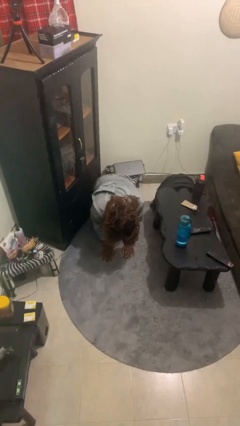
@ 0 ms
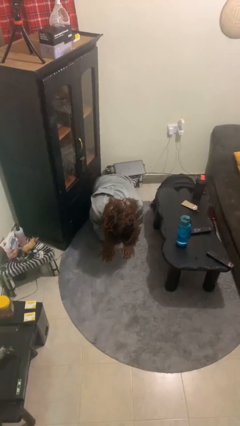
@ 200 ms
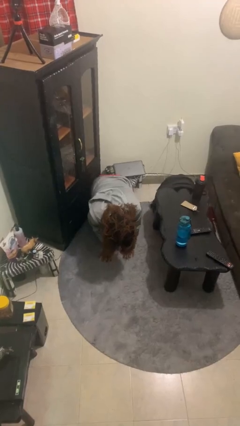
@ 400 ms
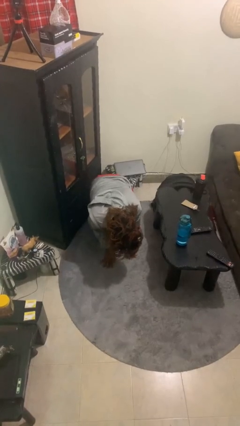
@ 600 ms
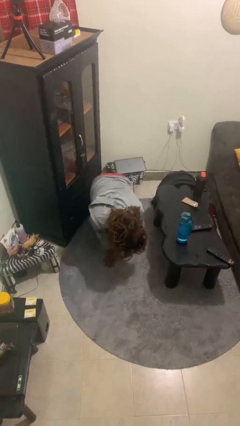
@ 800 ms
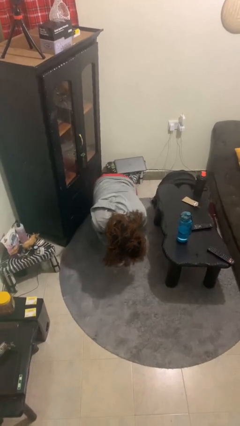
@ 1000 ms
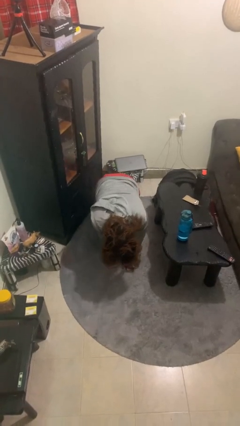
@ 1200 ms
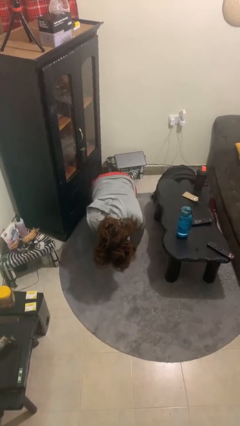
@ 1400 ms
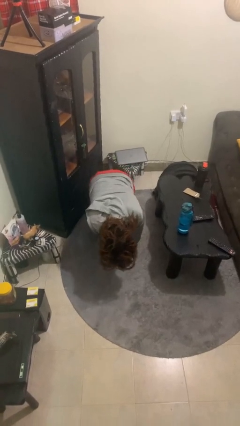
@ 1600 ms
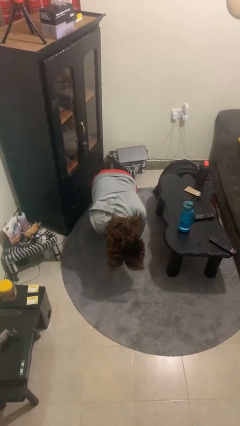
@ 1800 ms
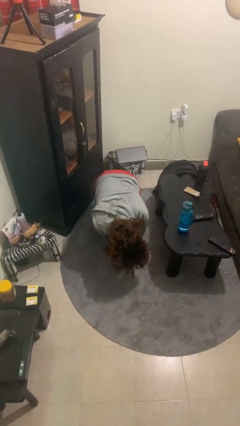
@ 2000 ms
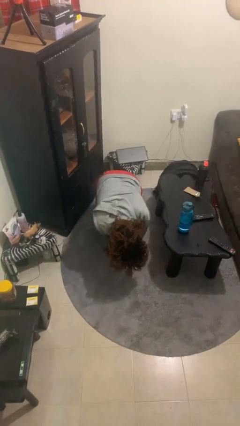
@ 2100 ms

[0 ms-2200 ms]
person crawls

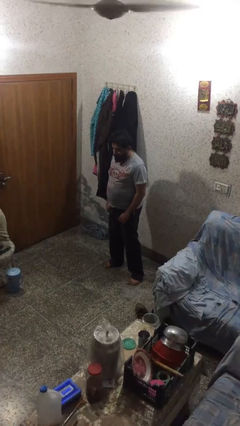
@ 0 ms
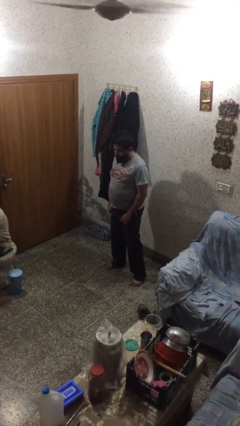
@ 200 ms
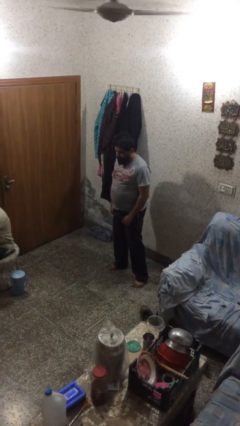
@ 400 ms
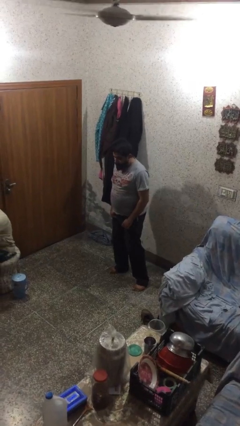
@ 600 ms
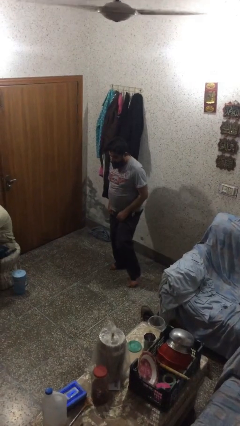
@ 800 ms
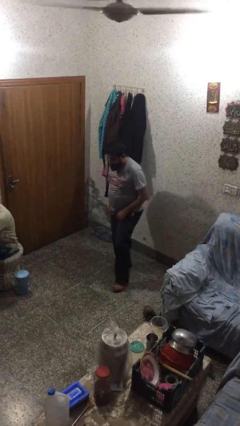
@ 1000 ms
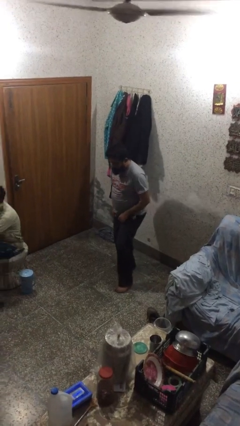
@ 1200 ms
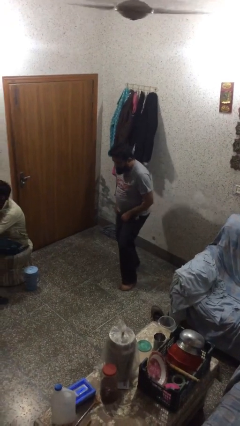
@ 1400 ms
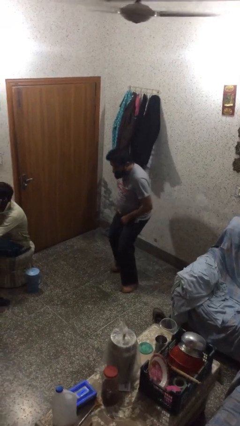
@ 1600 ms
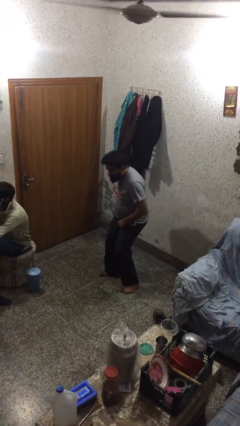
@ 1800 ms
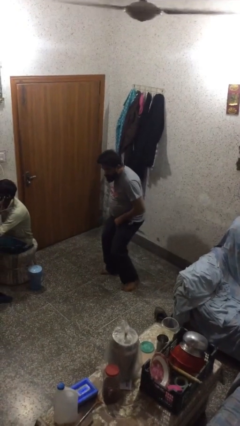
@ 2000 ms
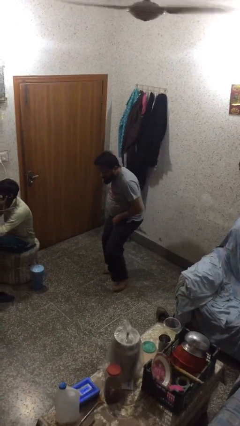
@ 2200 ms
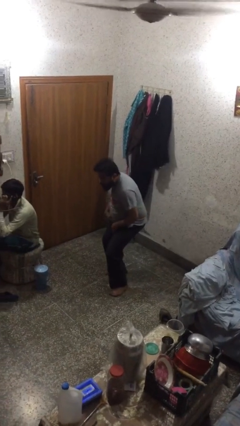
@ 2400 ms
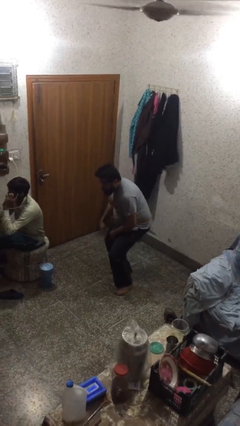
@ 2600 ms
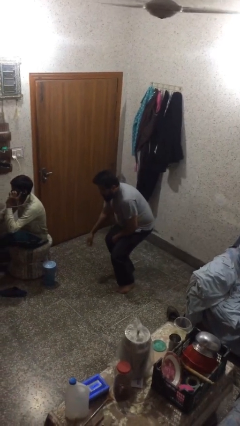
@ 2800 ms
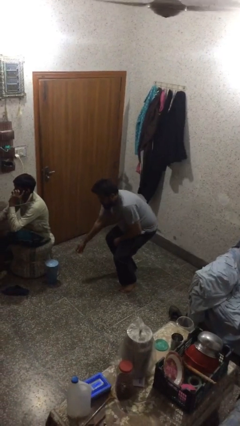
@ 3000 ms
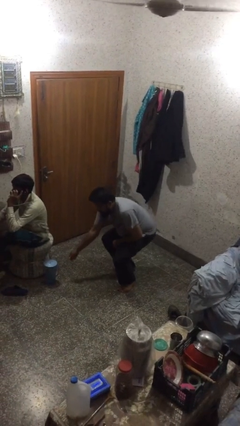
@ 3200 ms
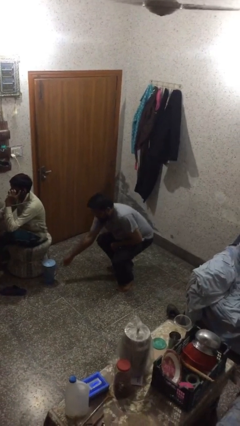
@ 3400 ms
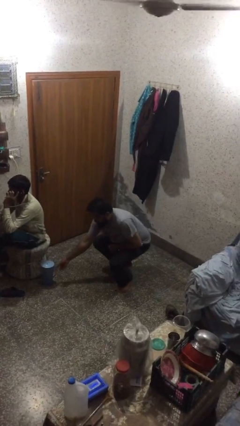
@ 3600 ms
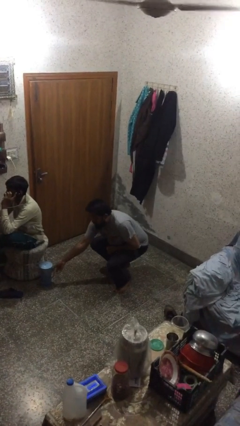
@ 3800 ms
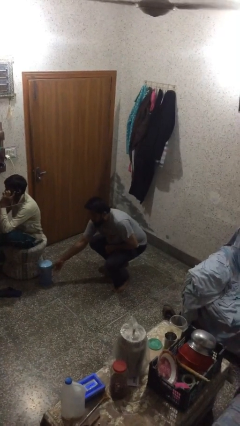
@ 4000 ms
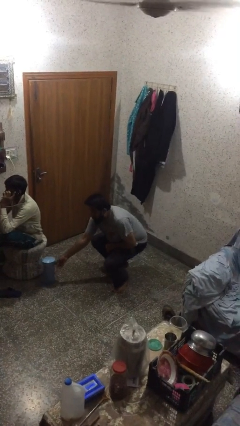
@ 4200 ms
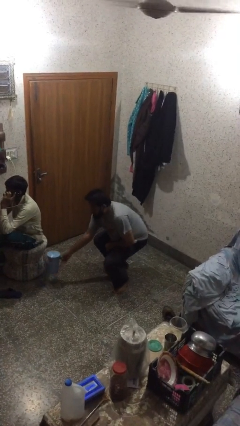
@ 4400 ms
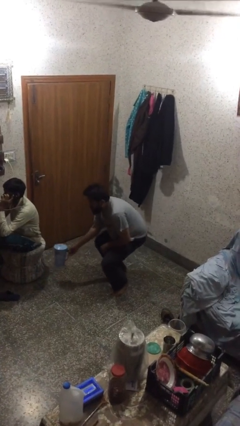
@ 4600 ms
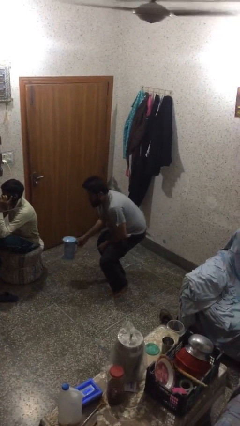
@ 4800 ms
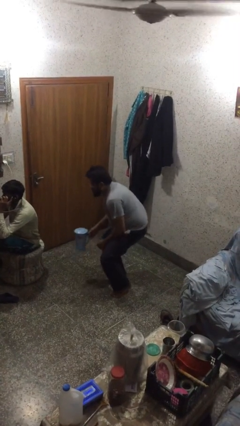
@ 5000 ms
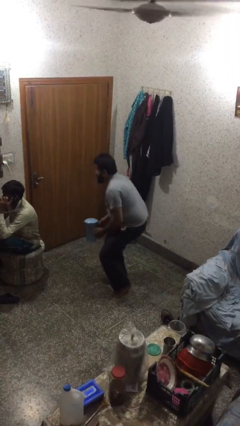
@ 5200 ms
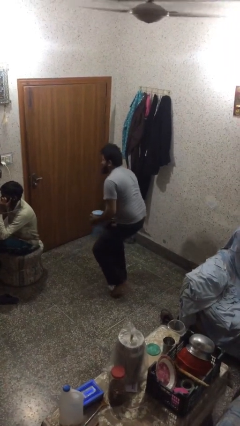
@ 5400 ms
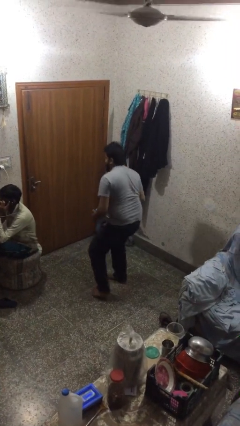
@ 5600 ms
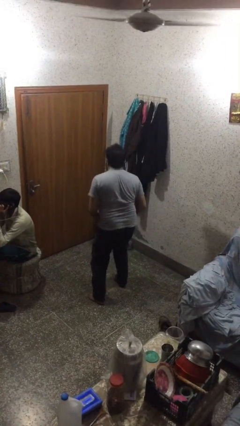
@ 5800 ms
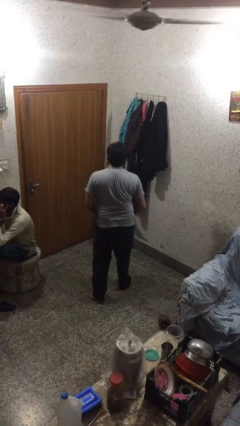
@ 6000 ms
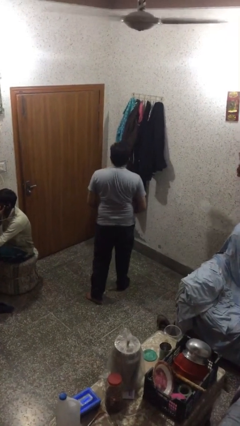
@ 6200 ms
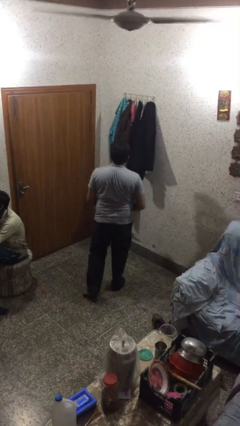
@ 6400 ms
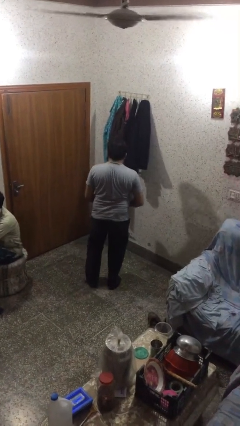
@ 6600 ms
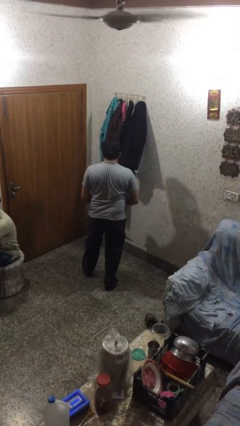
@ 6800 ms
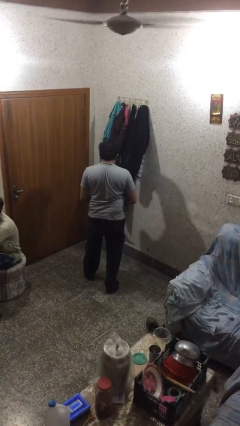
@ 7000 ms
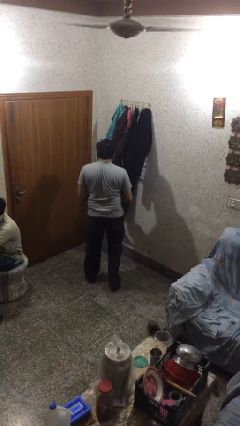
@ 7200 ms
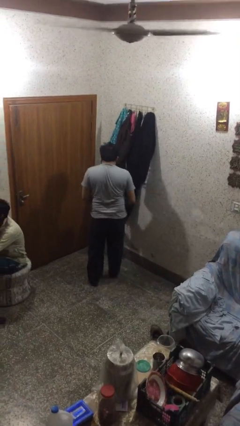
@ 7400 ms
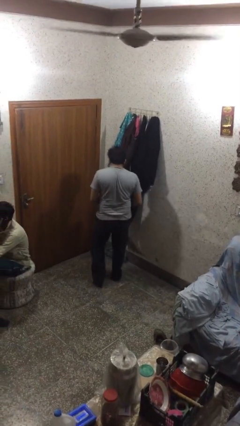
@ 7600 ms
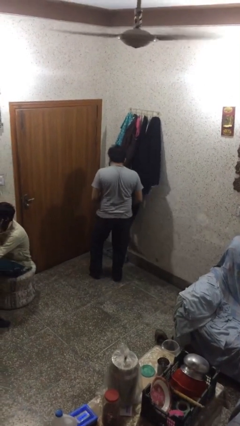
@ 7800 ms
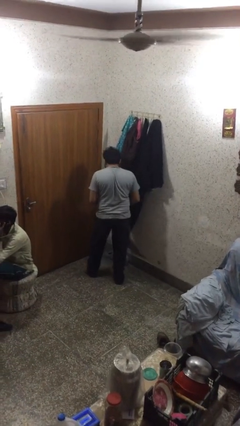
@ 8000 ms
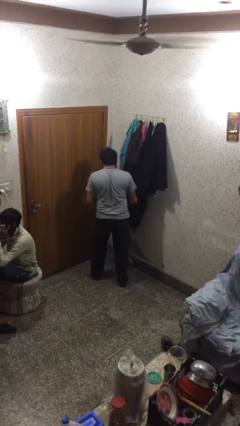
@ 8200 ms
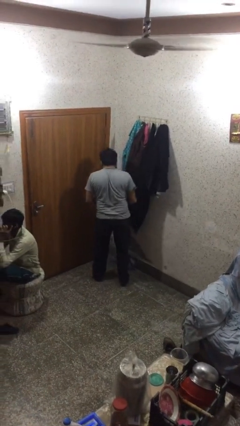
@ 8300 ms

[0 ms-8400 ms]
person steals object from person

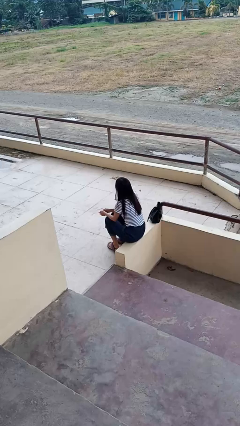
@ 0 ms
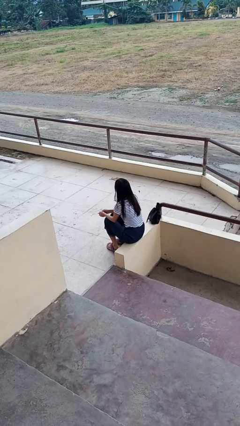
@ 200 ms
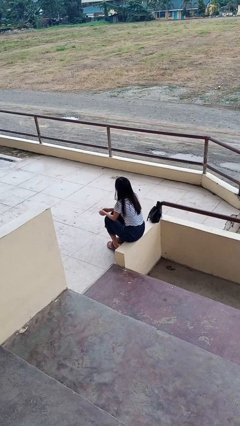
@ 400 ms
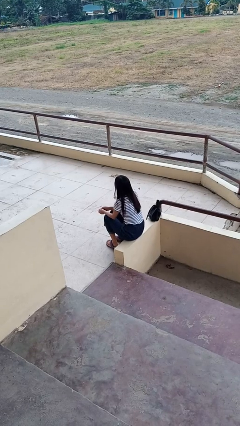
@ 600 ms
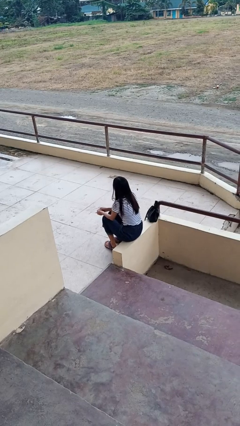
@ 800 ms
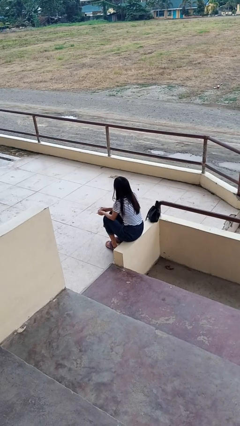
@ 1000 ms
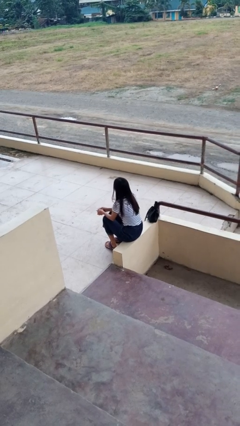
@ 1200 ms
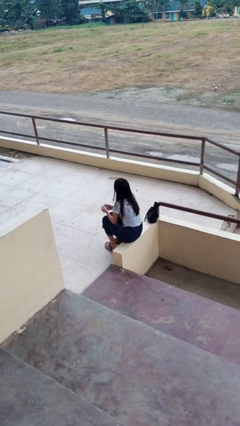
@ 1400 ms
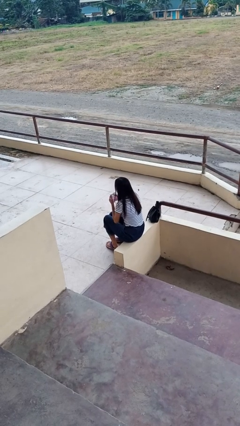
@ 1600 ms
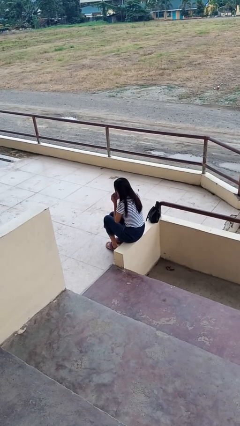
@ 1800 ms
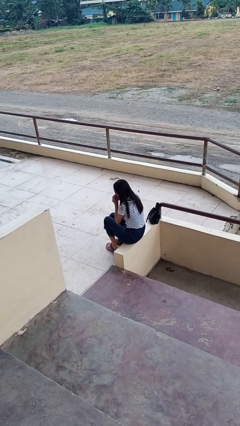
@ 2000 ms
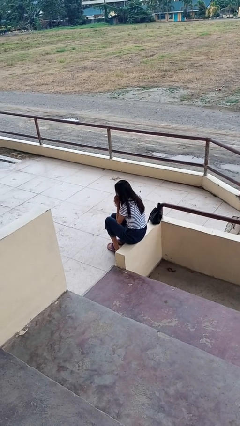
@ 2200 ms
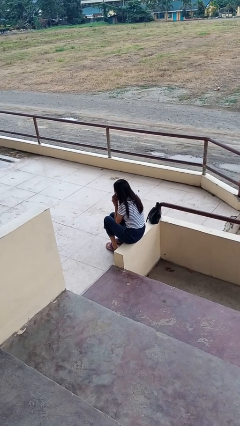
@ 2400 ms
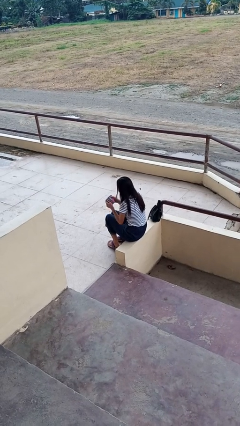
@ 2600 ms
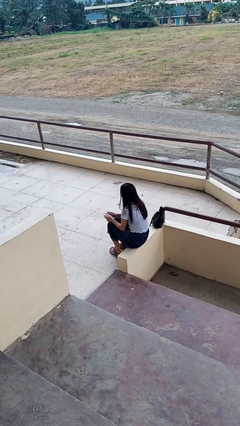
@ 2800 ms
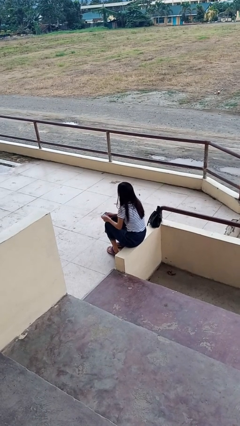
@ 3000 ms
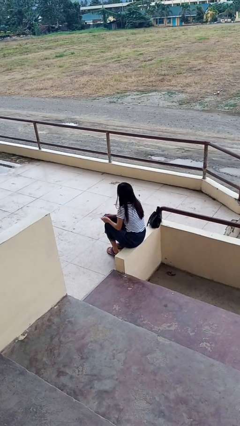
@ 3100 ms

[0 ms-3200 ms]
person blows nose

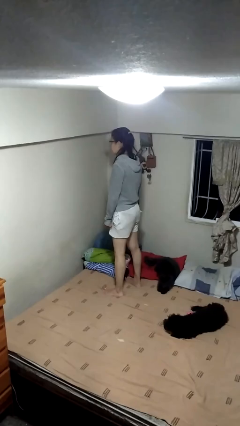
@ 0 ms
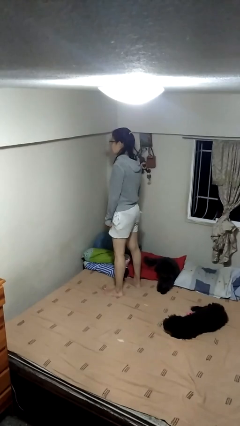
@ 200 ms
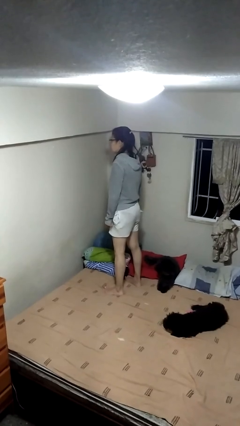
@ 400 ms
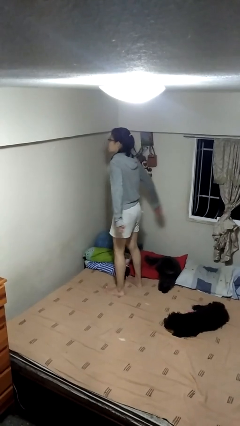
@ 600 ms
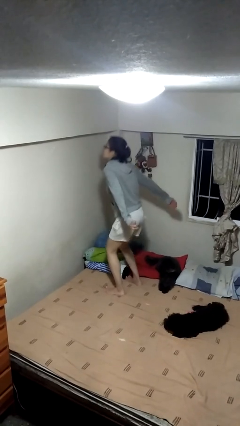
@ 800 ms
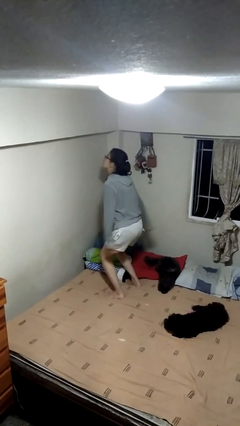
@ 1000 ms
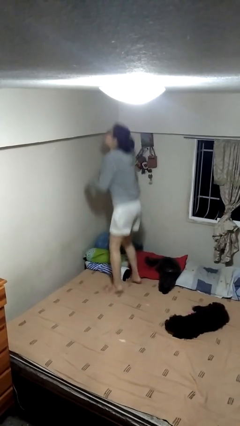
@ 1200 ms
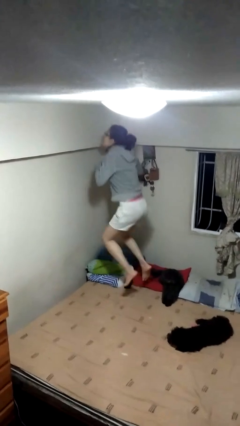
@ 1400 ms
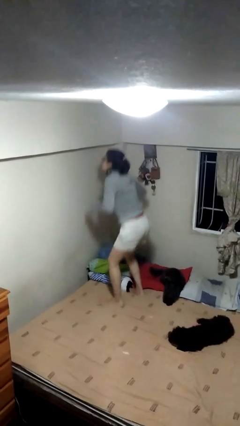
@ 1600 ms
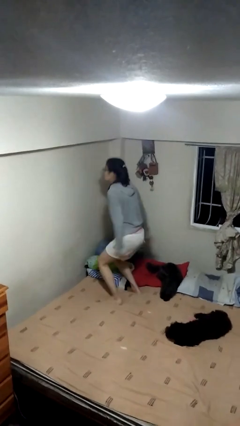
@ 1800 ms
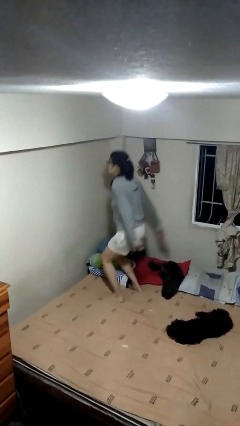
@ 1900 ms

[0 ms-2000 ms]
person jumps on bed

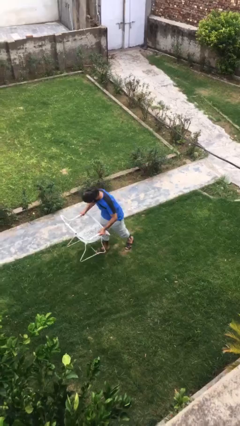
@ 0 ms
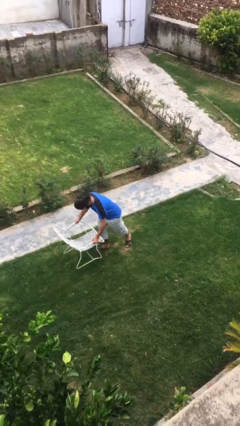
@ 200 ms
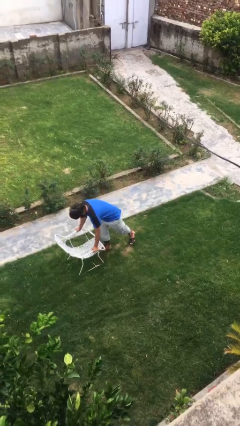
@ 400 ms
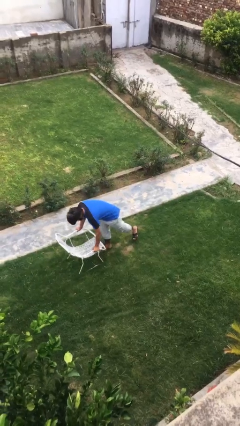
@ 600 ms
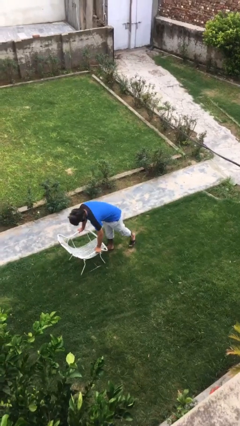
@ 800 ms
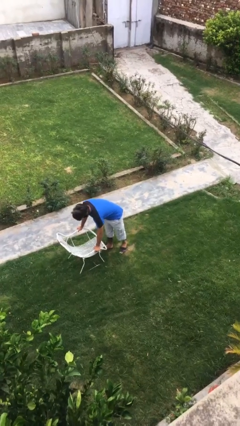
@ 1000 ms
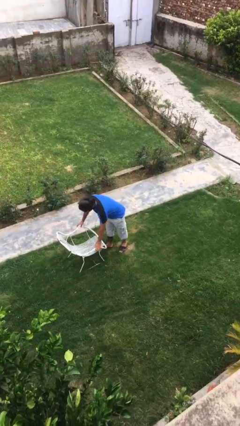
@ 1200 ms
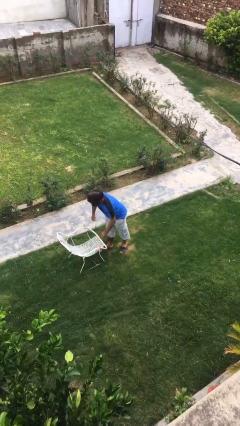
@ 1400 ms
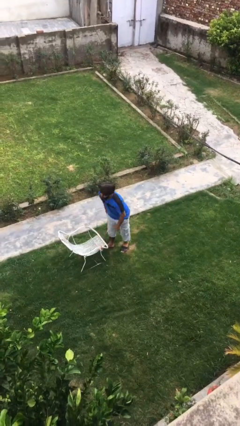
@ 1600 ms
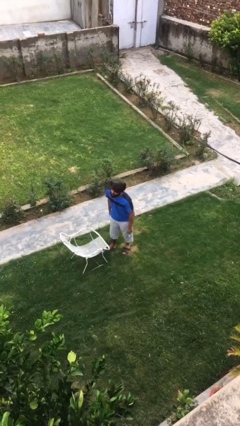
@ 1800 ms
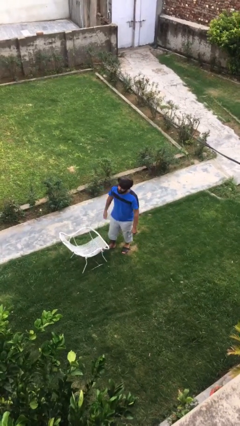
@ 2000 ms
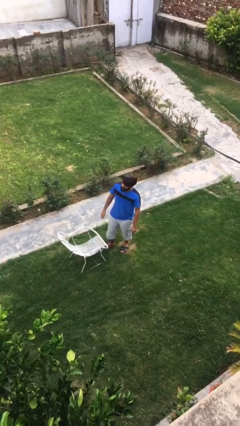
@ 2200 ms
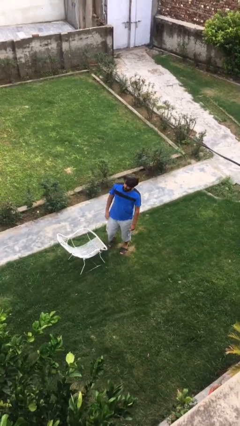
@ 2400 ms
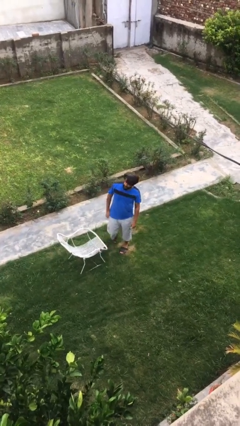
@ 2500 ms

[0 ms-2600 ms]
person puts down object on floor
